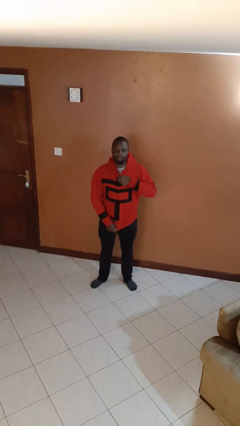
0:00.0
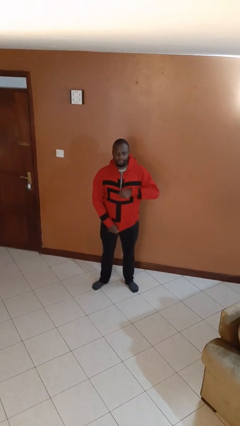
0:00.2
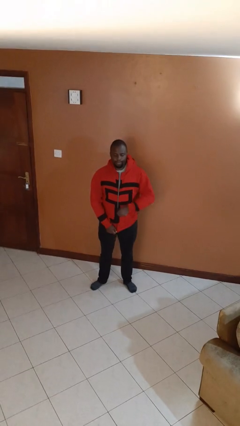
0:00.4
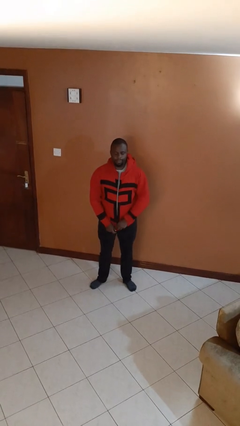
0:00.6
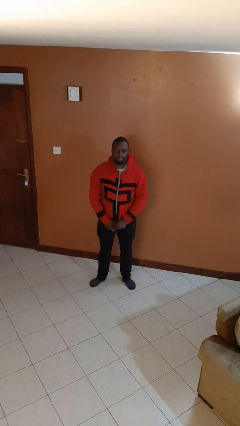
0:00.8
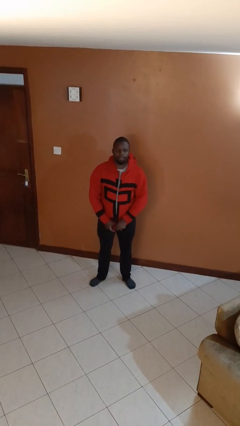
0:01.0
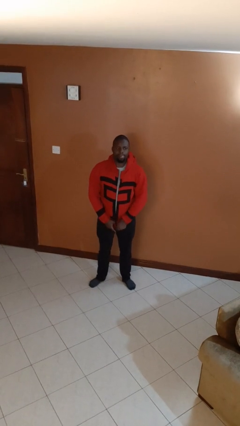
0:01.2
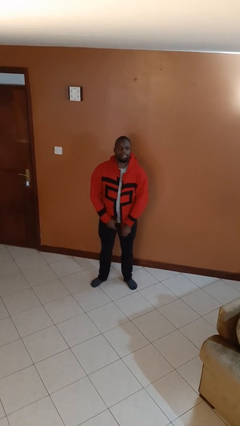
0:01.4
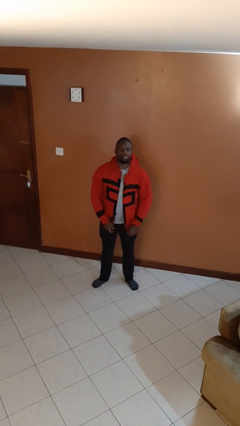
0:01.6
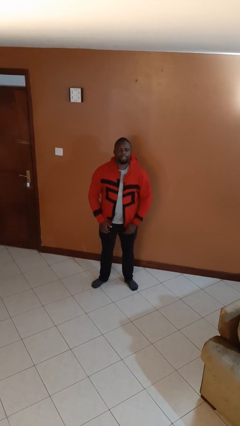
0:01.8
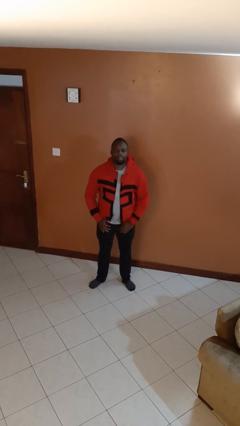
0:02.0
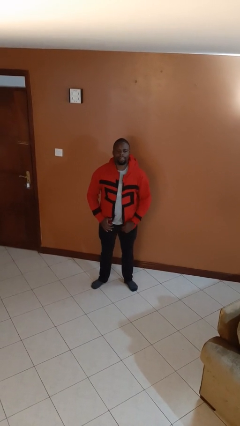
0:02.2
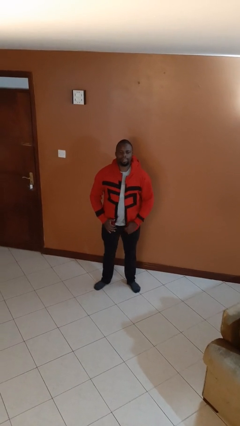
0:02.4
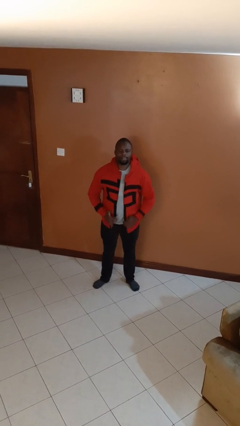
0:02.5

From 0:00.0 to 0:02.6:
person unzips jacket

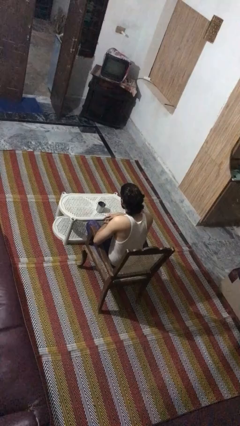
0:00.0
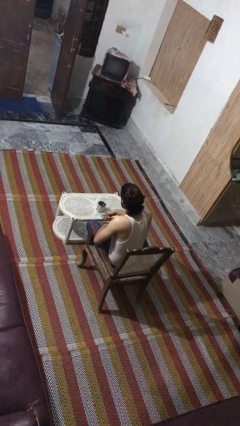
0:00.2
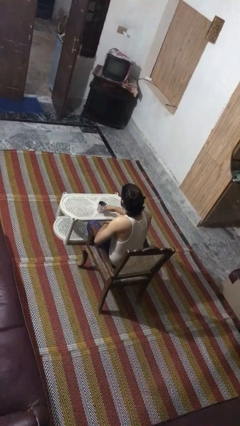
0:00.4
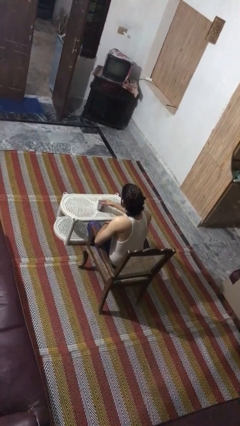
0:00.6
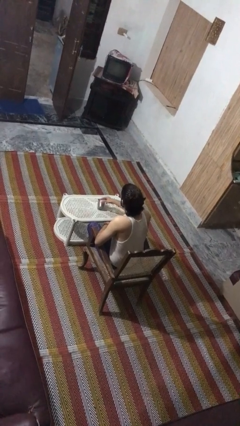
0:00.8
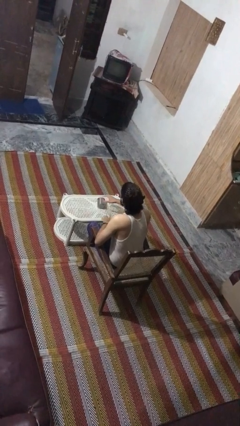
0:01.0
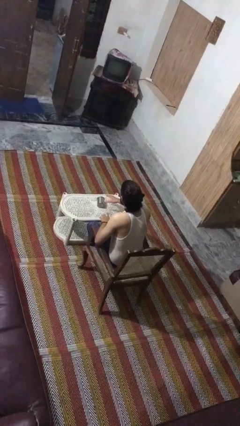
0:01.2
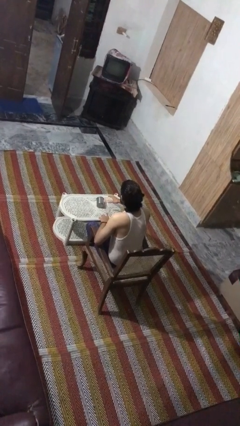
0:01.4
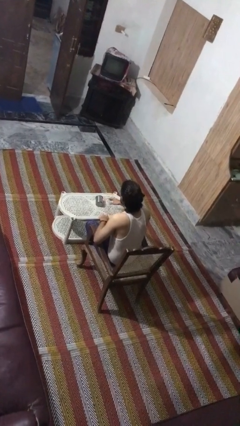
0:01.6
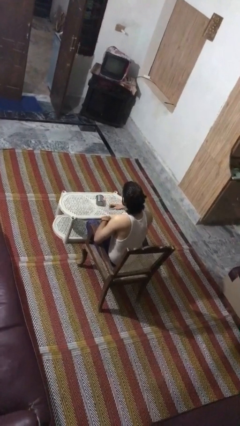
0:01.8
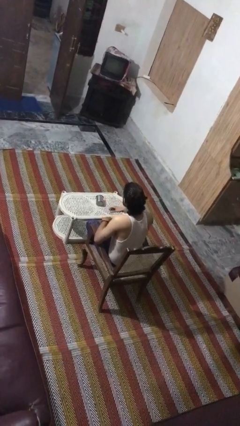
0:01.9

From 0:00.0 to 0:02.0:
person knocks over glass

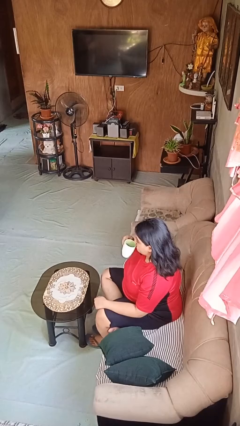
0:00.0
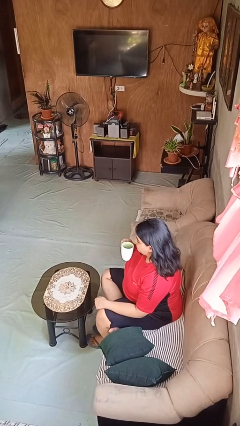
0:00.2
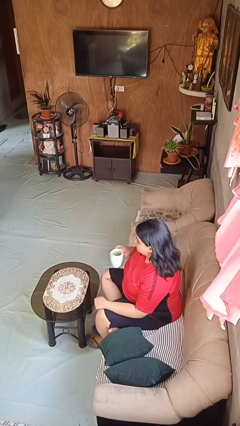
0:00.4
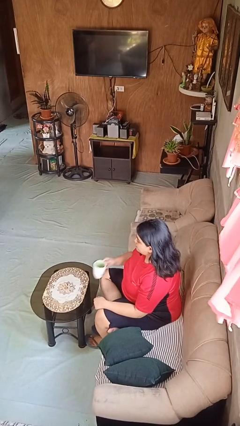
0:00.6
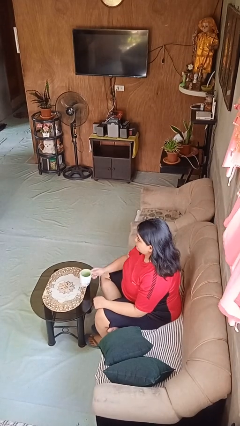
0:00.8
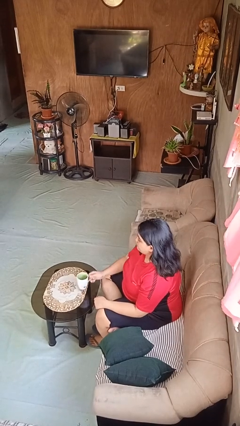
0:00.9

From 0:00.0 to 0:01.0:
person puts down object on table

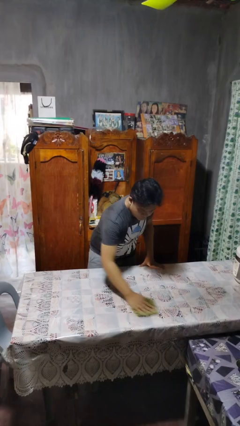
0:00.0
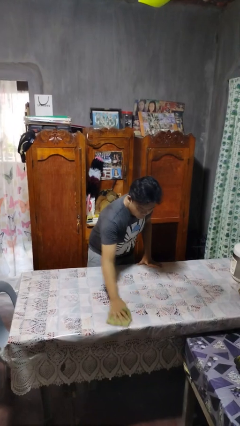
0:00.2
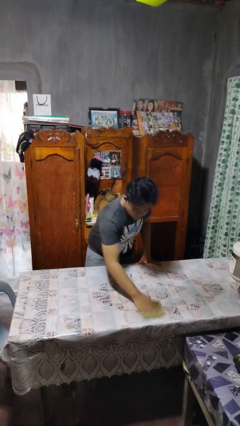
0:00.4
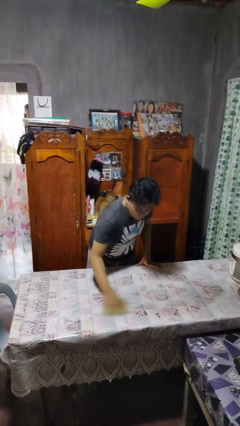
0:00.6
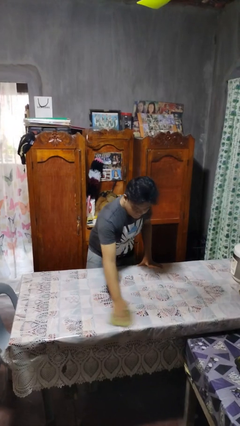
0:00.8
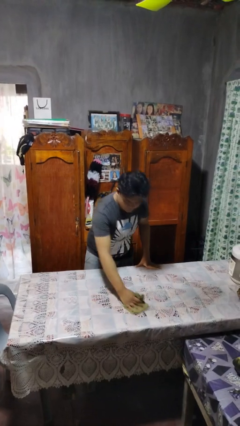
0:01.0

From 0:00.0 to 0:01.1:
person cleans table with rag

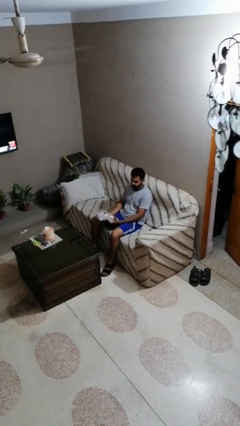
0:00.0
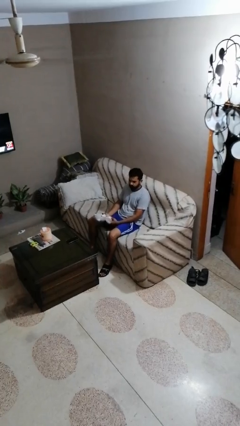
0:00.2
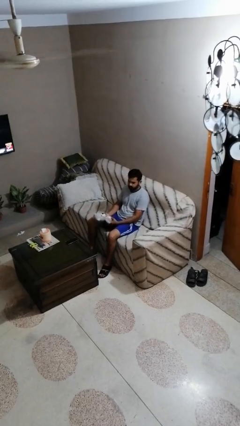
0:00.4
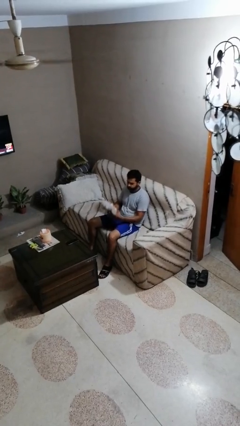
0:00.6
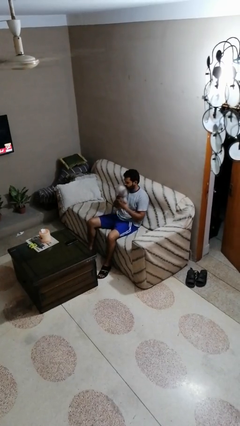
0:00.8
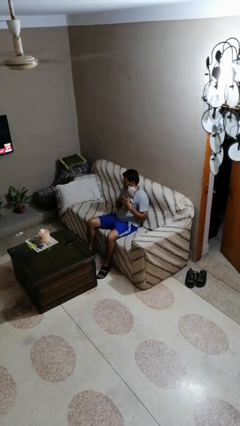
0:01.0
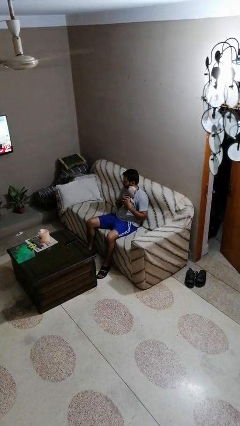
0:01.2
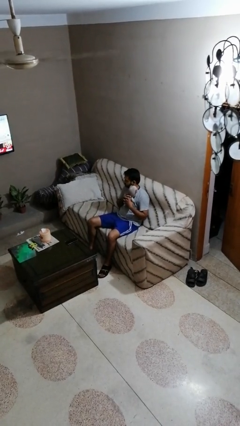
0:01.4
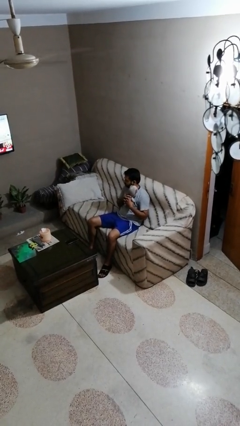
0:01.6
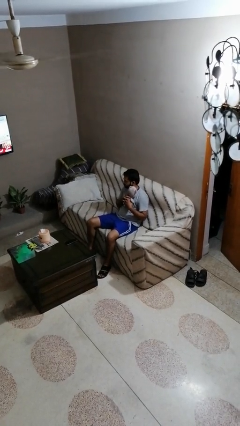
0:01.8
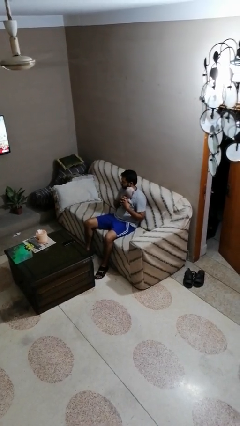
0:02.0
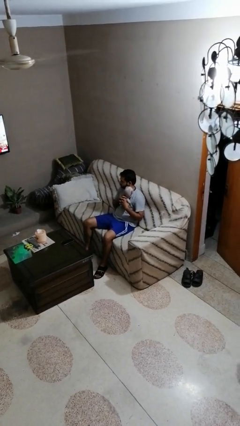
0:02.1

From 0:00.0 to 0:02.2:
person hugs stuffed animal

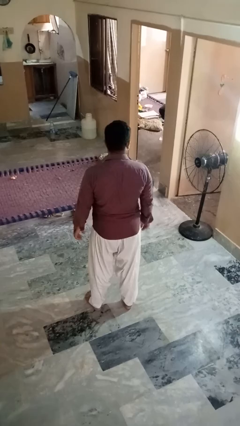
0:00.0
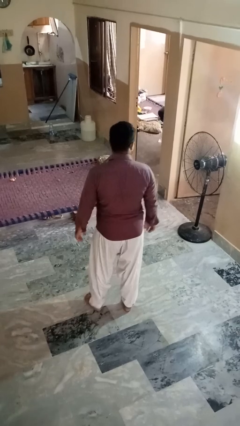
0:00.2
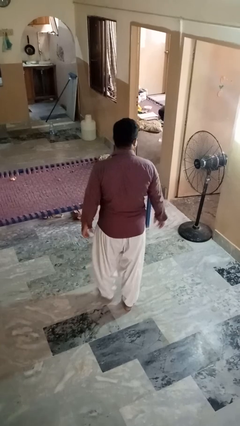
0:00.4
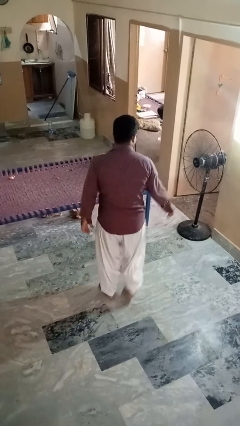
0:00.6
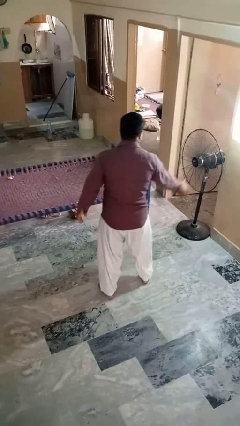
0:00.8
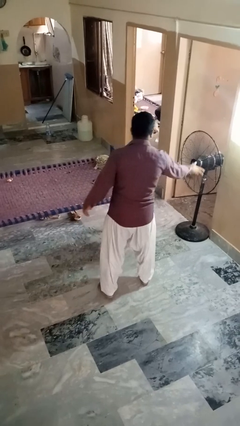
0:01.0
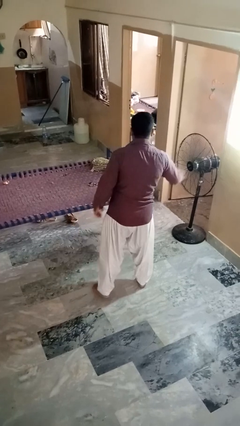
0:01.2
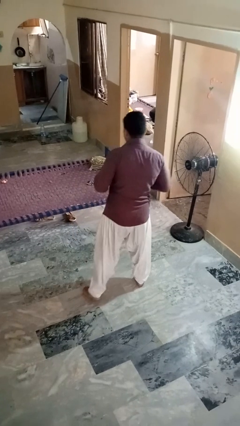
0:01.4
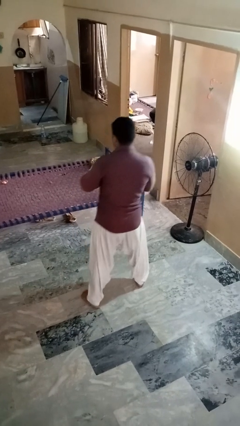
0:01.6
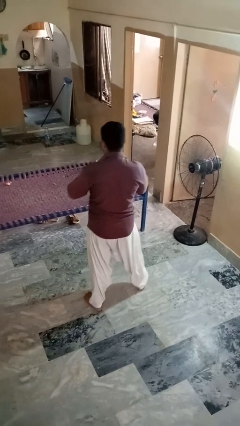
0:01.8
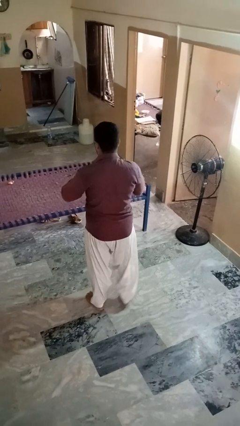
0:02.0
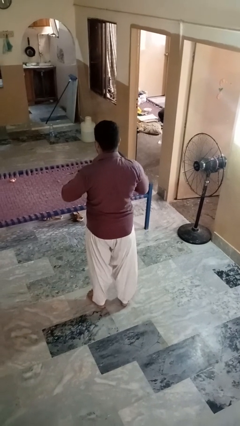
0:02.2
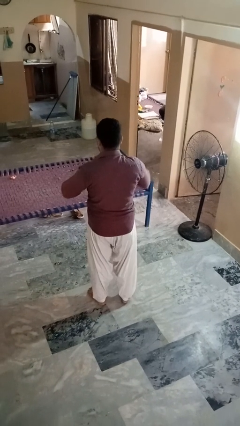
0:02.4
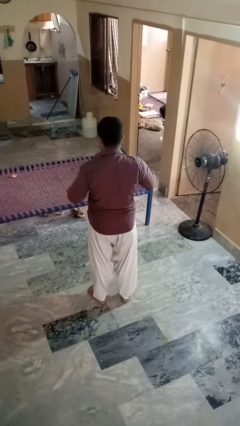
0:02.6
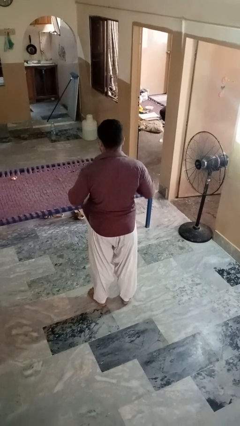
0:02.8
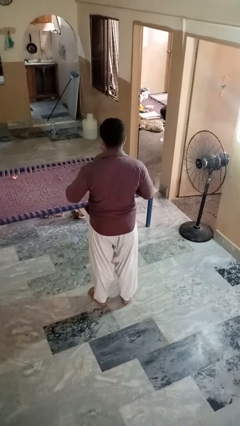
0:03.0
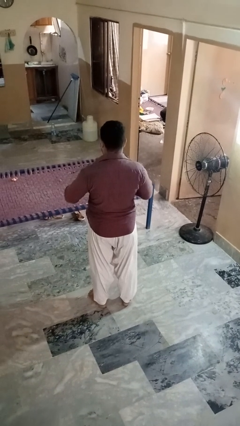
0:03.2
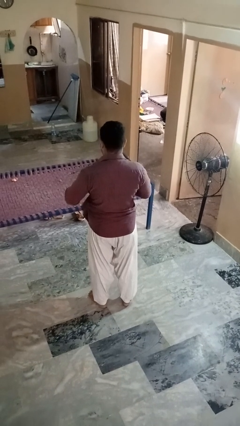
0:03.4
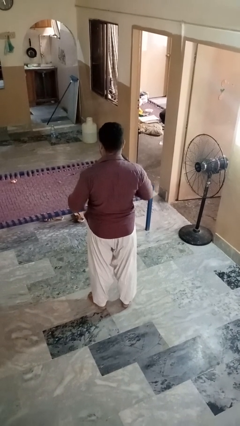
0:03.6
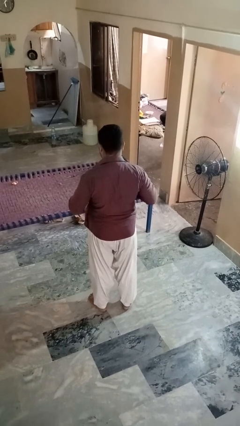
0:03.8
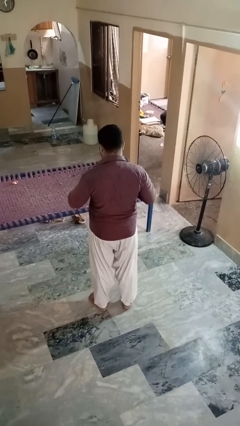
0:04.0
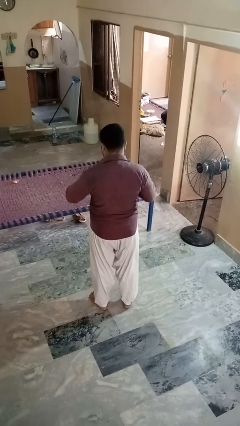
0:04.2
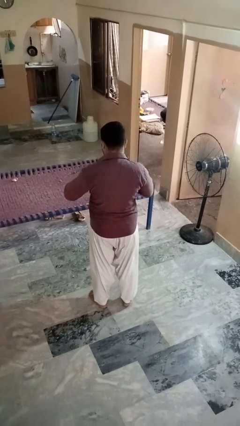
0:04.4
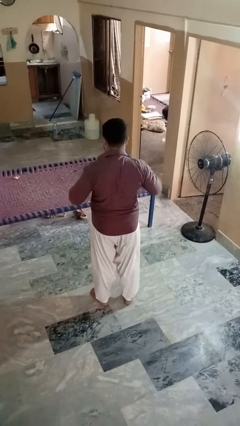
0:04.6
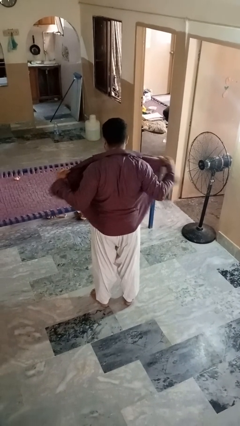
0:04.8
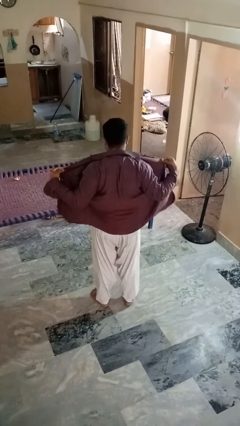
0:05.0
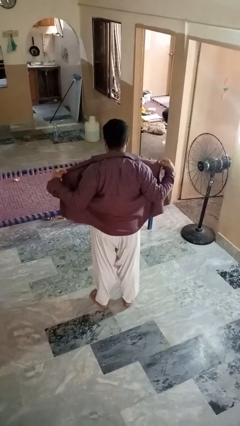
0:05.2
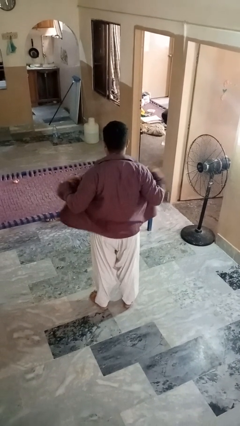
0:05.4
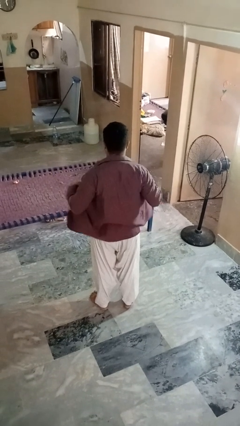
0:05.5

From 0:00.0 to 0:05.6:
person unbuttons shirt

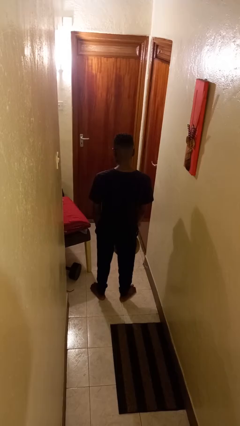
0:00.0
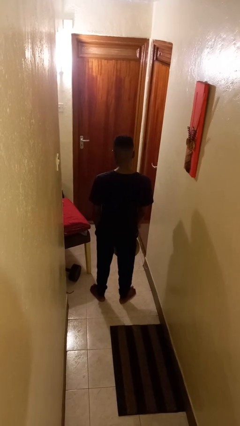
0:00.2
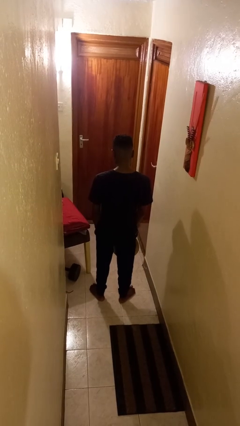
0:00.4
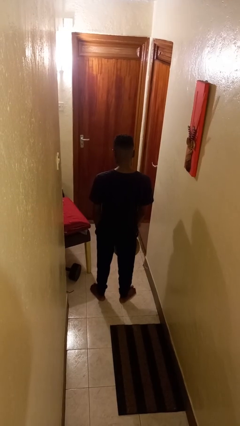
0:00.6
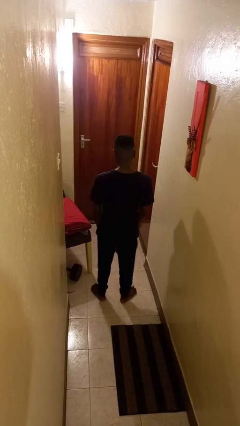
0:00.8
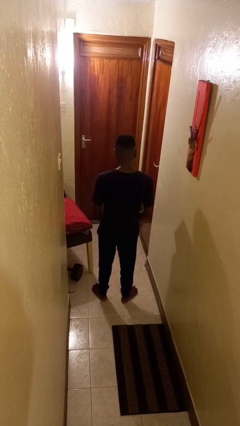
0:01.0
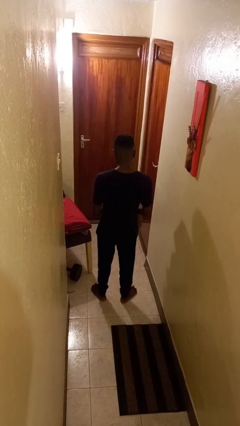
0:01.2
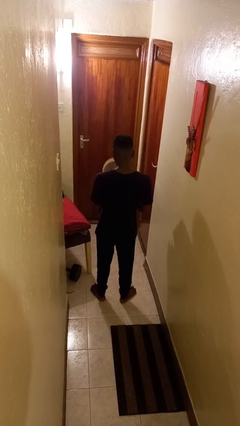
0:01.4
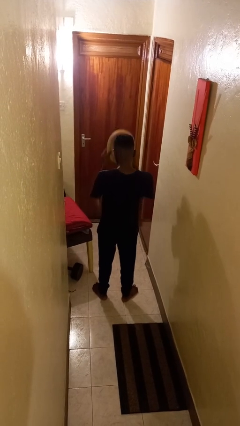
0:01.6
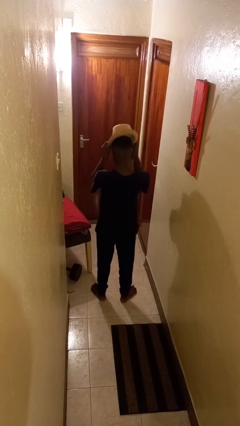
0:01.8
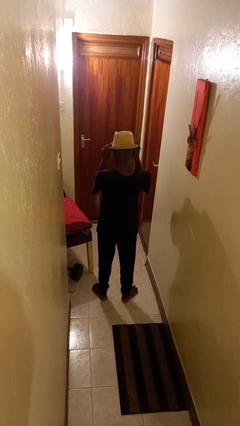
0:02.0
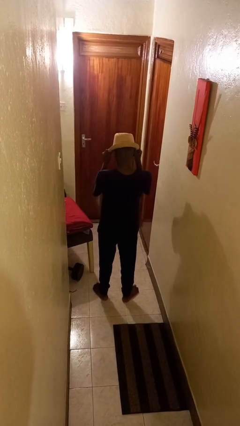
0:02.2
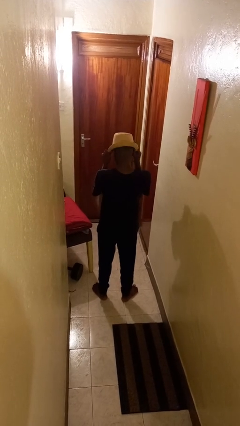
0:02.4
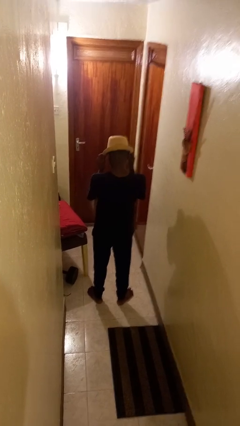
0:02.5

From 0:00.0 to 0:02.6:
person puts on hat

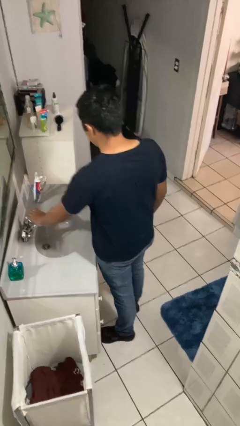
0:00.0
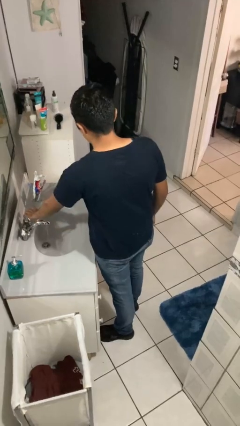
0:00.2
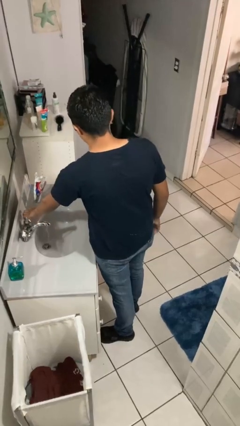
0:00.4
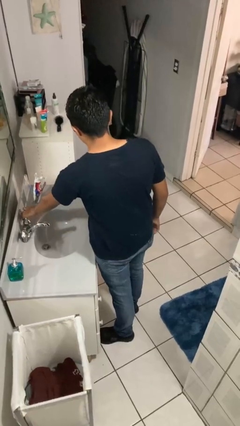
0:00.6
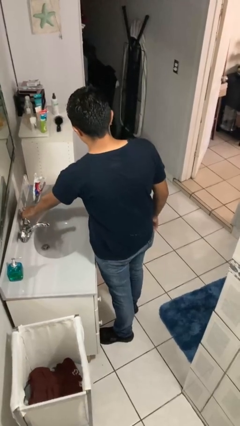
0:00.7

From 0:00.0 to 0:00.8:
person turns off faucet
